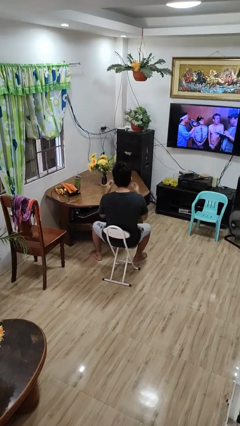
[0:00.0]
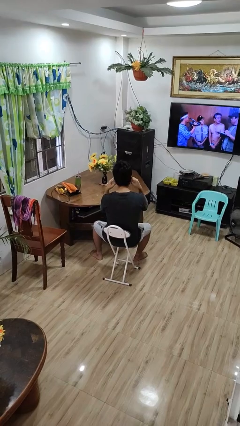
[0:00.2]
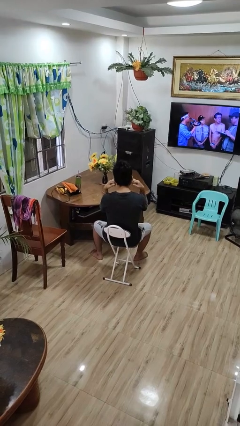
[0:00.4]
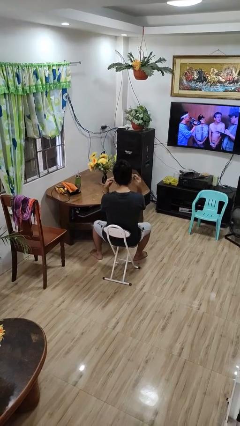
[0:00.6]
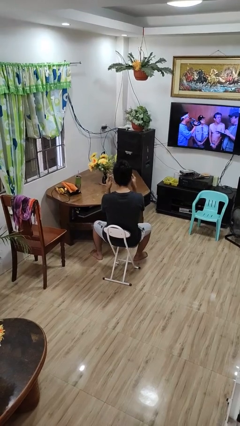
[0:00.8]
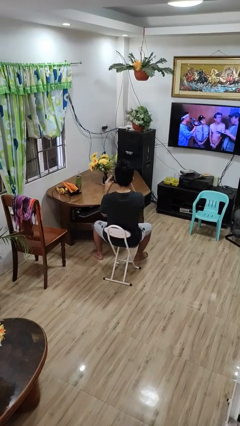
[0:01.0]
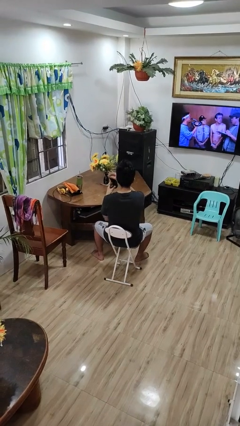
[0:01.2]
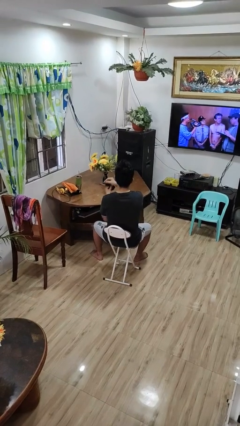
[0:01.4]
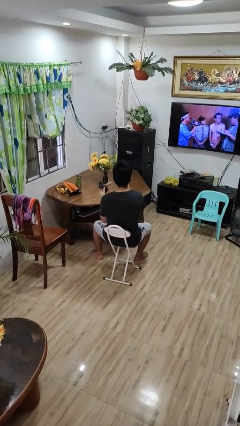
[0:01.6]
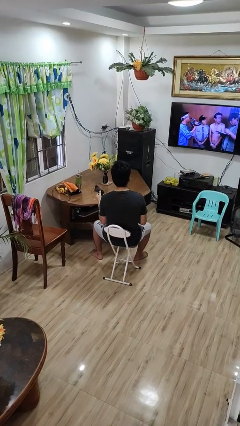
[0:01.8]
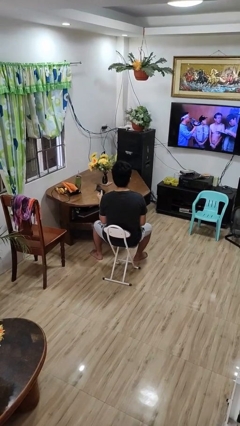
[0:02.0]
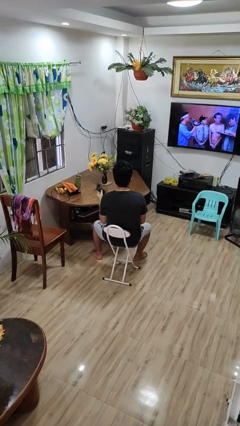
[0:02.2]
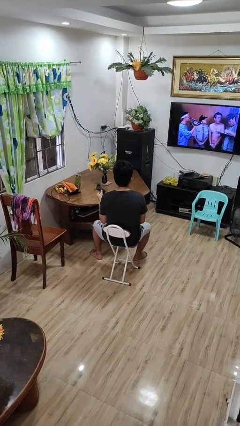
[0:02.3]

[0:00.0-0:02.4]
person takes off facemask

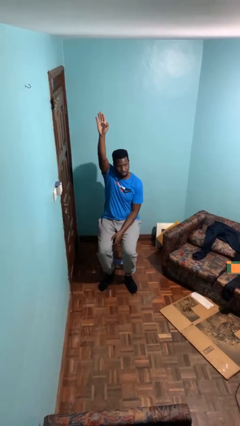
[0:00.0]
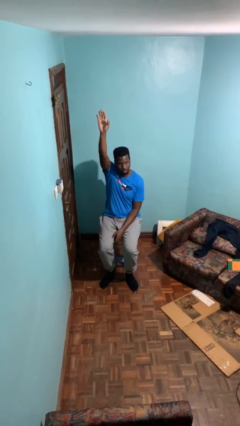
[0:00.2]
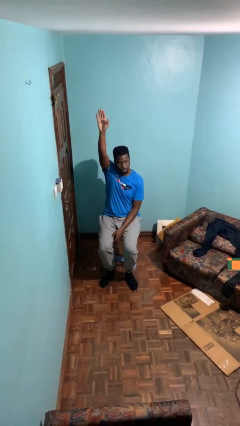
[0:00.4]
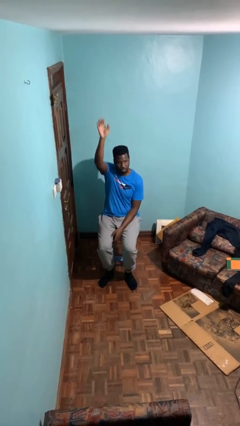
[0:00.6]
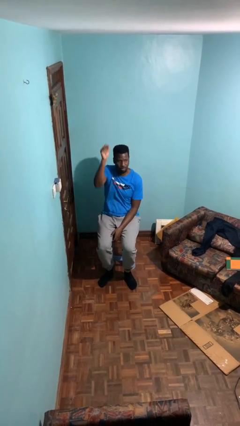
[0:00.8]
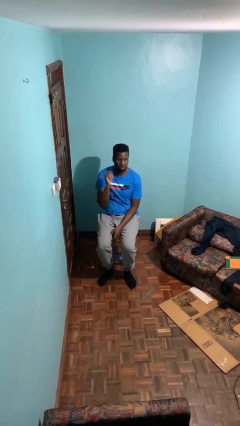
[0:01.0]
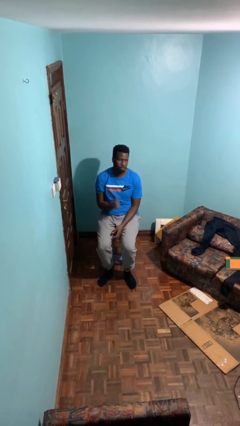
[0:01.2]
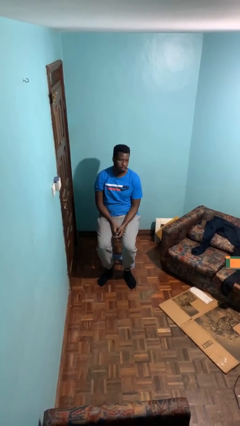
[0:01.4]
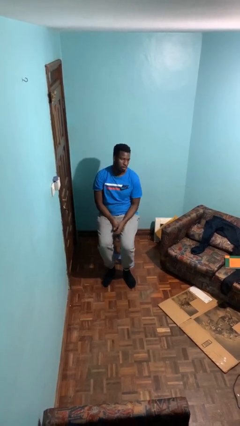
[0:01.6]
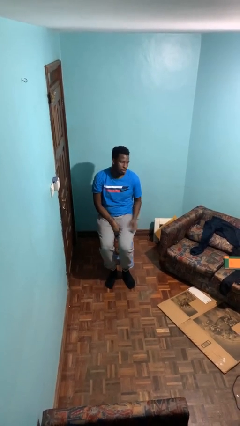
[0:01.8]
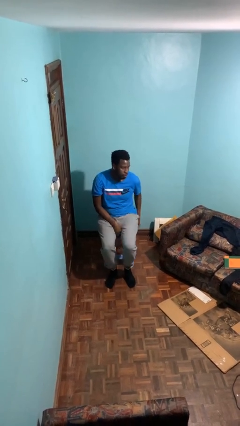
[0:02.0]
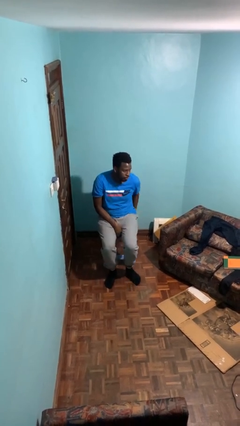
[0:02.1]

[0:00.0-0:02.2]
person gestures lower hand

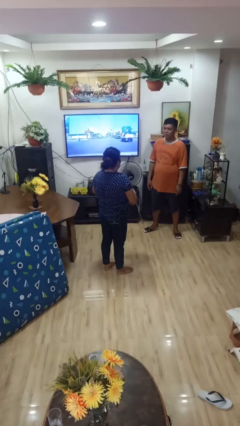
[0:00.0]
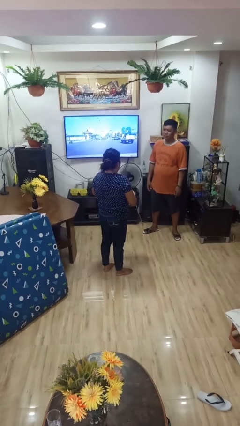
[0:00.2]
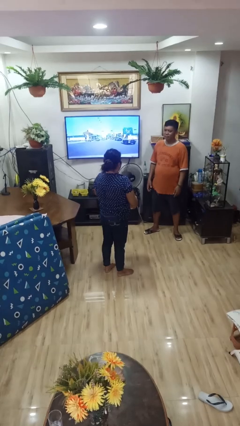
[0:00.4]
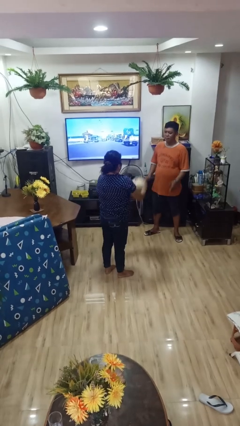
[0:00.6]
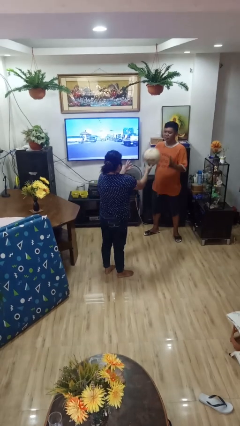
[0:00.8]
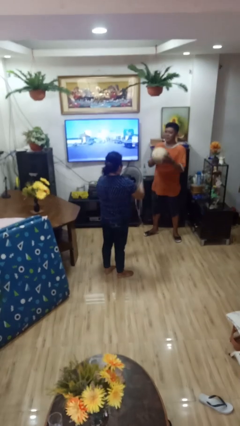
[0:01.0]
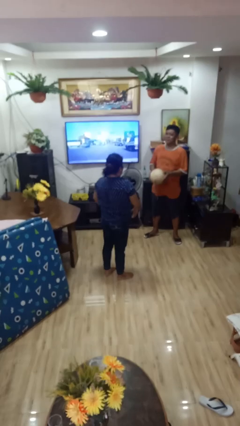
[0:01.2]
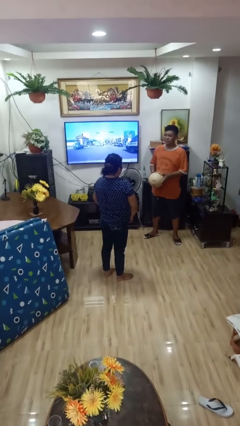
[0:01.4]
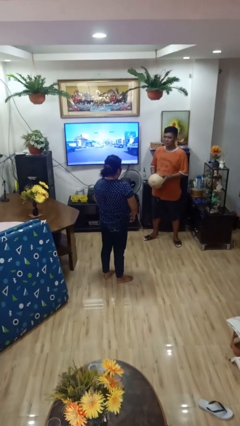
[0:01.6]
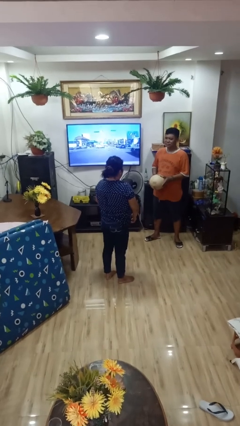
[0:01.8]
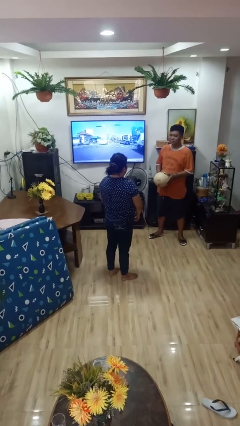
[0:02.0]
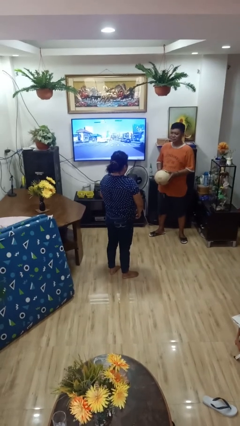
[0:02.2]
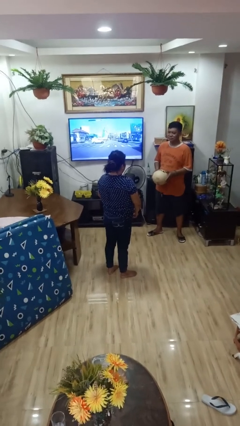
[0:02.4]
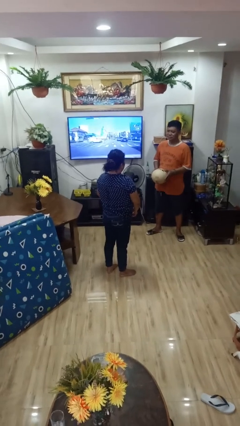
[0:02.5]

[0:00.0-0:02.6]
person throws object to person

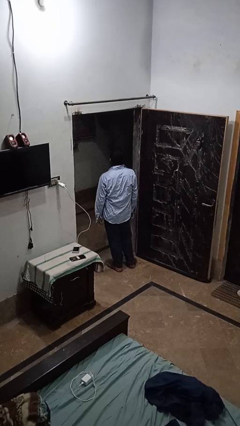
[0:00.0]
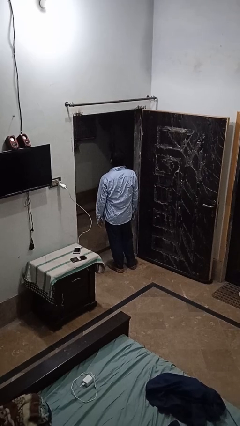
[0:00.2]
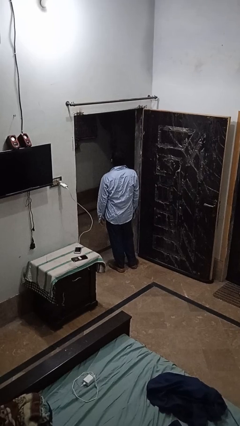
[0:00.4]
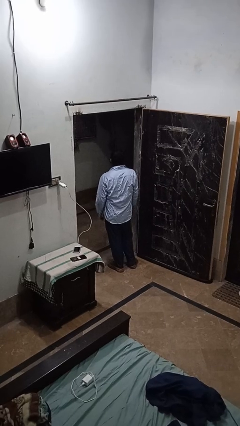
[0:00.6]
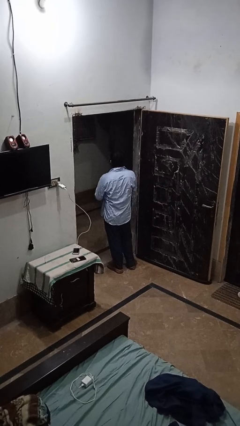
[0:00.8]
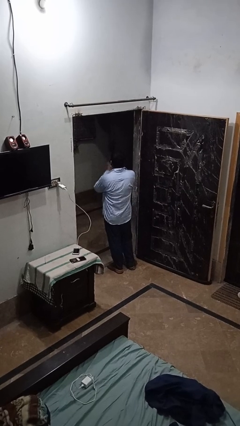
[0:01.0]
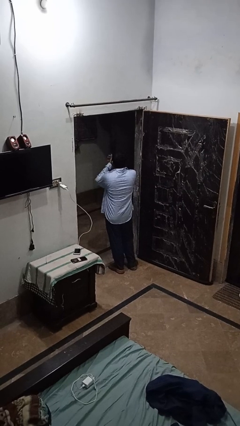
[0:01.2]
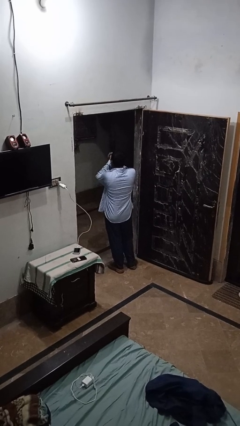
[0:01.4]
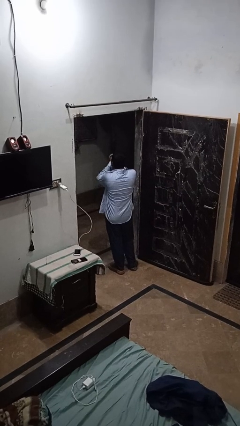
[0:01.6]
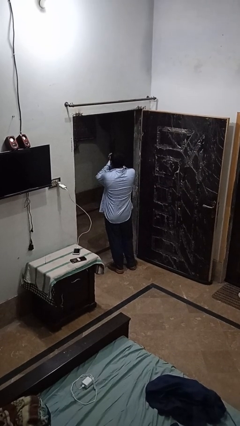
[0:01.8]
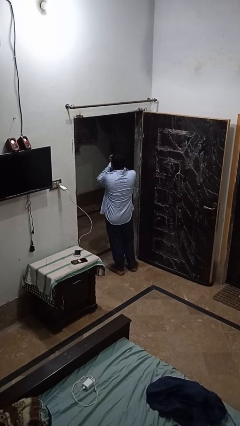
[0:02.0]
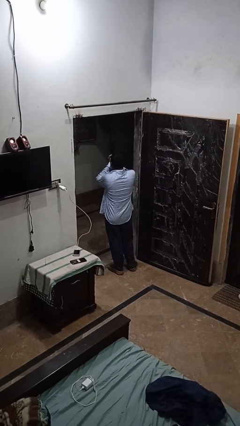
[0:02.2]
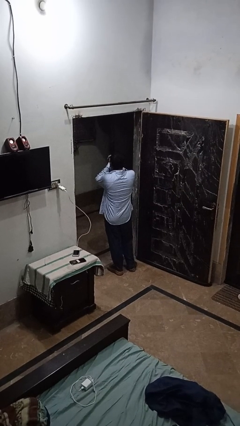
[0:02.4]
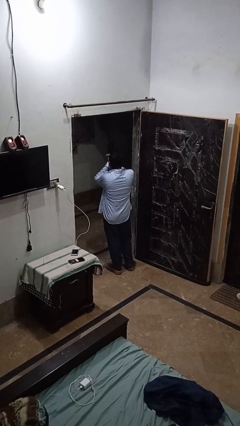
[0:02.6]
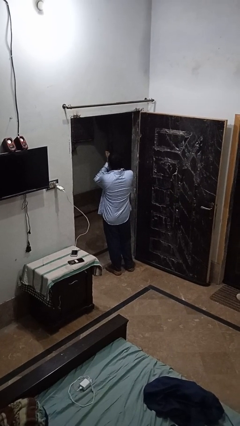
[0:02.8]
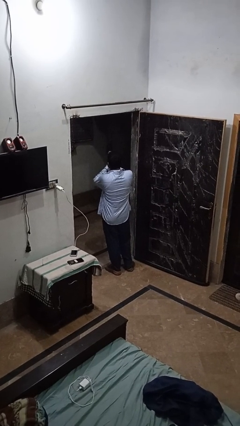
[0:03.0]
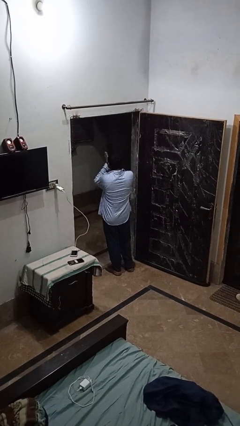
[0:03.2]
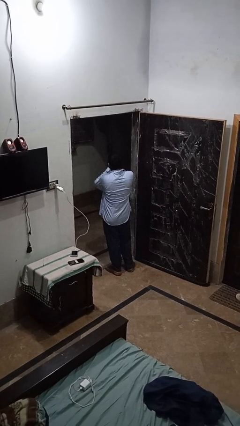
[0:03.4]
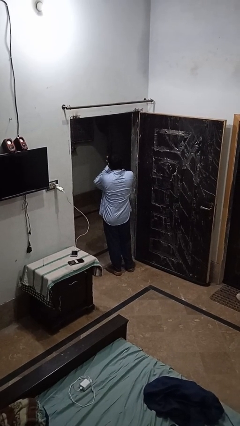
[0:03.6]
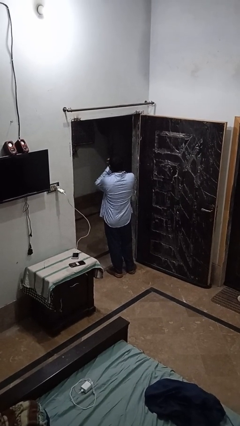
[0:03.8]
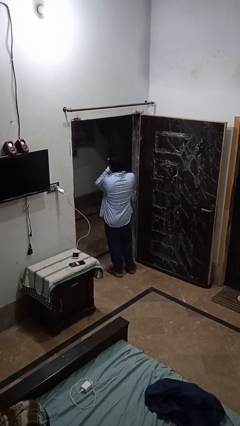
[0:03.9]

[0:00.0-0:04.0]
person blows into hands

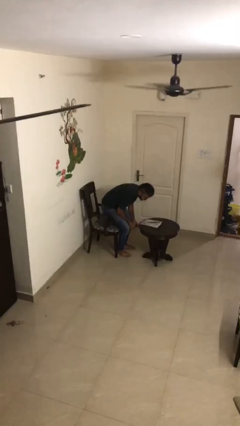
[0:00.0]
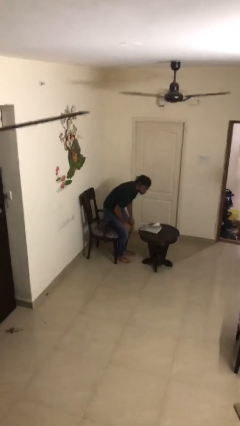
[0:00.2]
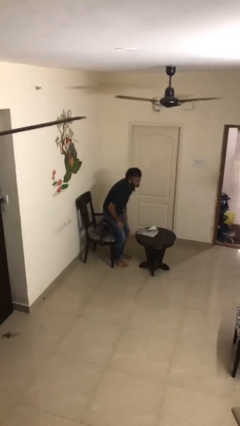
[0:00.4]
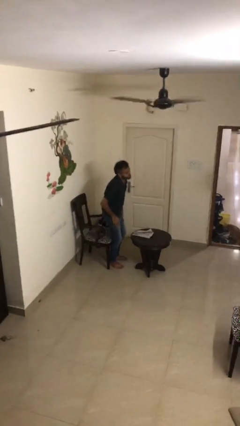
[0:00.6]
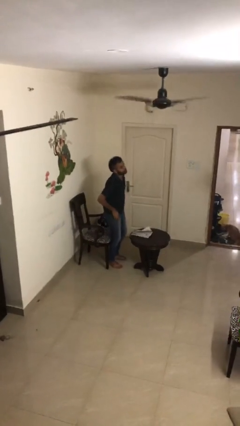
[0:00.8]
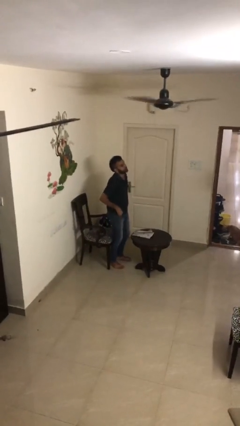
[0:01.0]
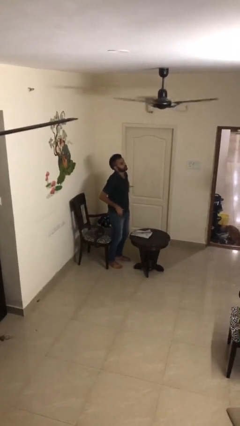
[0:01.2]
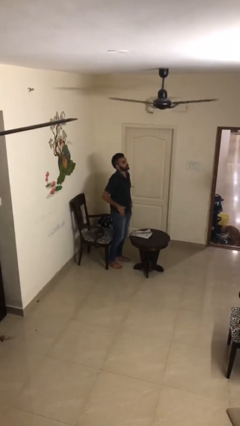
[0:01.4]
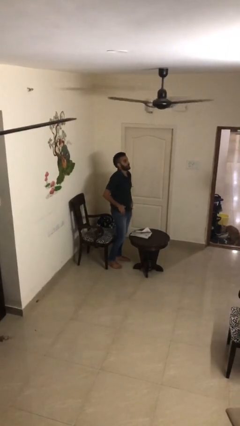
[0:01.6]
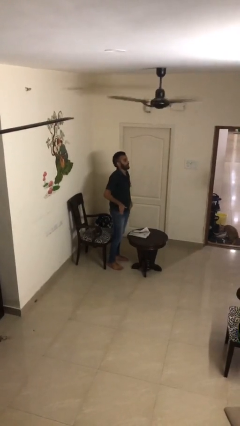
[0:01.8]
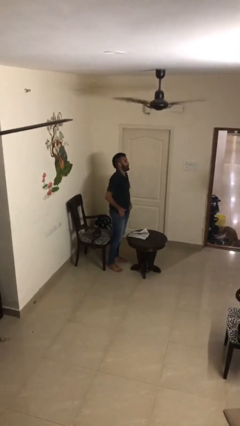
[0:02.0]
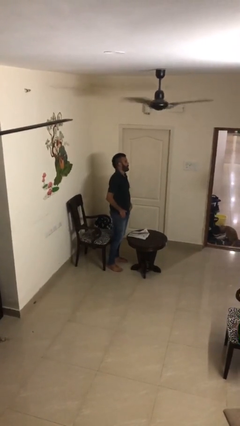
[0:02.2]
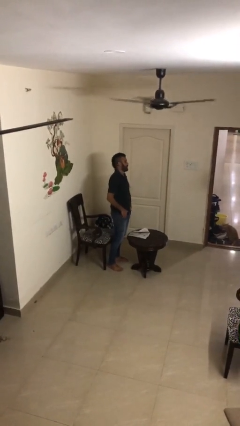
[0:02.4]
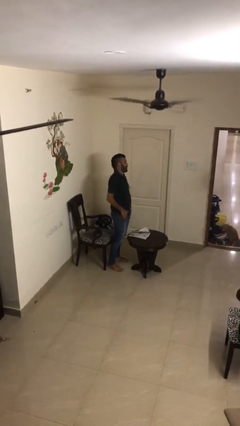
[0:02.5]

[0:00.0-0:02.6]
person stands up

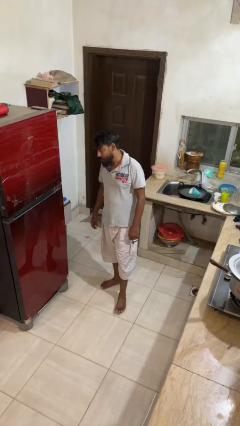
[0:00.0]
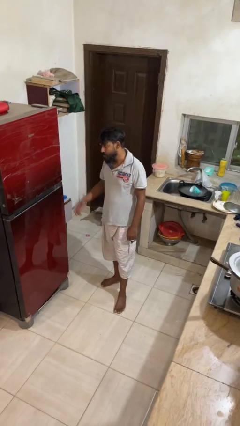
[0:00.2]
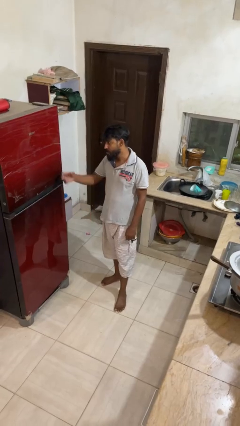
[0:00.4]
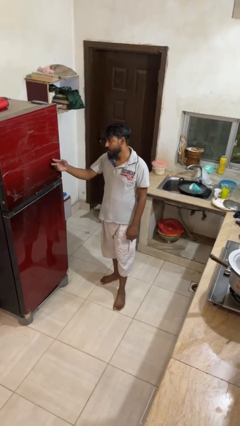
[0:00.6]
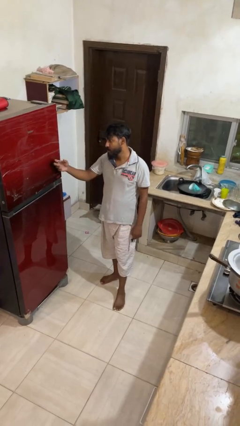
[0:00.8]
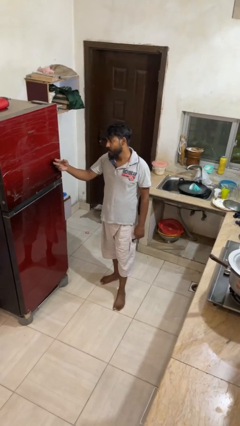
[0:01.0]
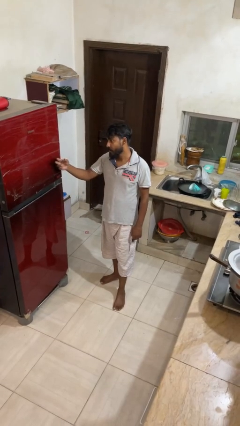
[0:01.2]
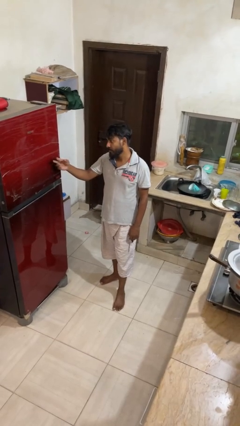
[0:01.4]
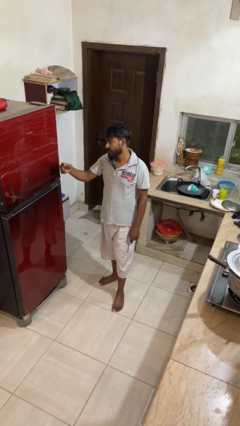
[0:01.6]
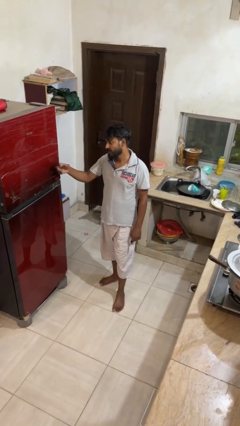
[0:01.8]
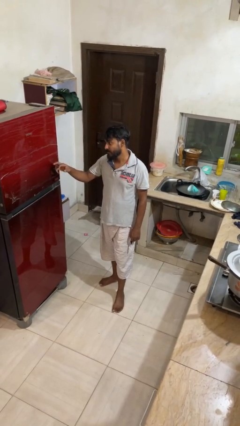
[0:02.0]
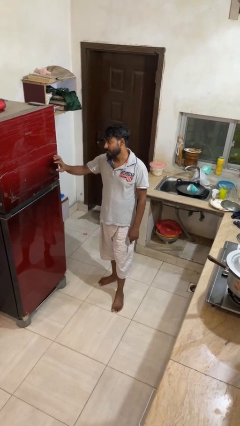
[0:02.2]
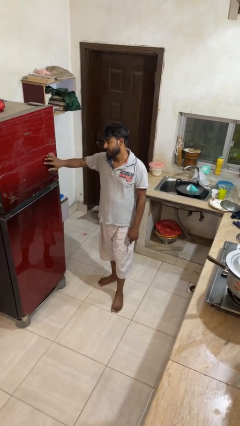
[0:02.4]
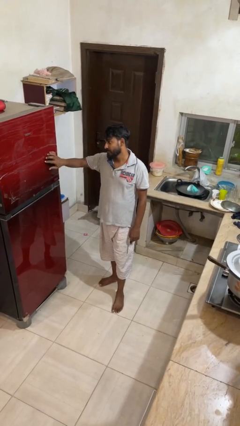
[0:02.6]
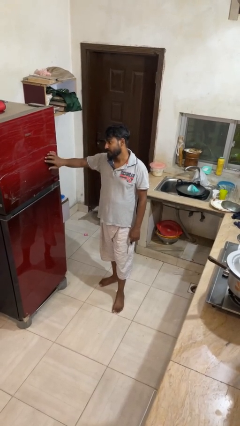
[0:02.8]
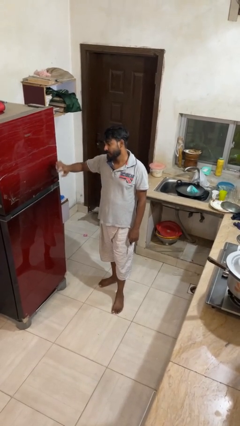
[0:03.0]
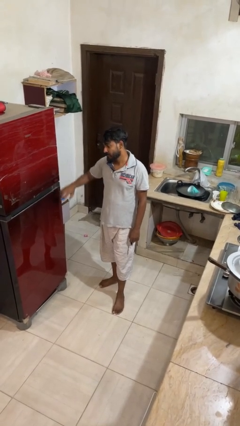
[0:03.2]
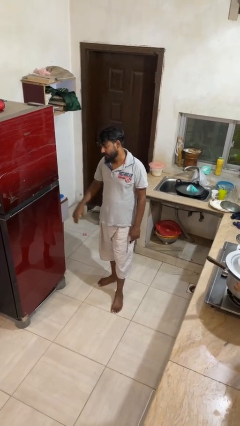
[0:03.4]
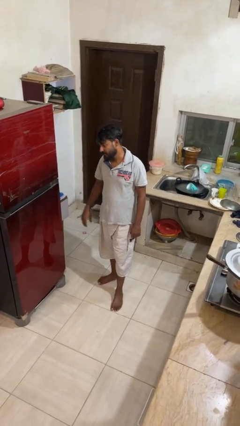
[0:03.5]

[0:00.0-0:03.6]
person taps object with finger

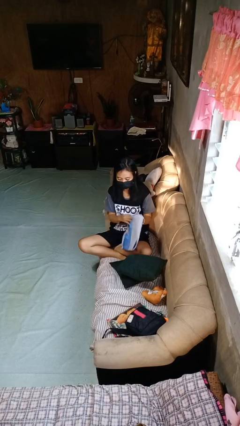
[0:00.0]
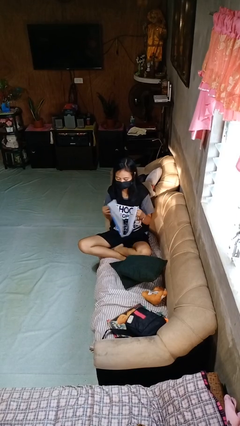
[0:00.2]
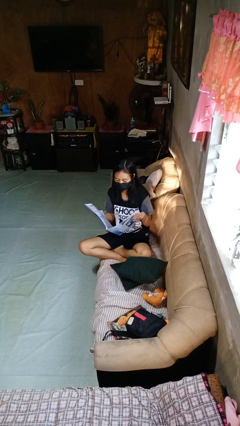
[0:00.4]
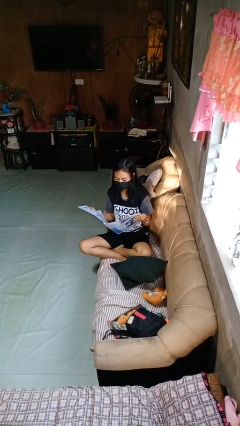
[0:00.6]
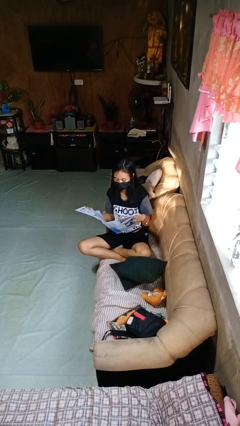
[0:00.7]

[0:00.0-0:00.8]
person reads newspaper
